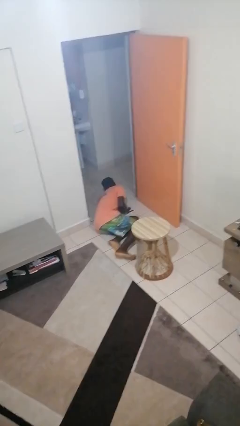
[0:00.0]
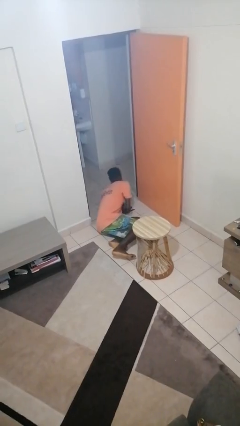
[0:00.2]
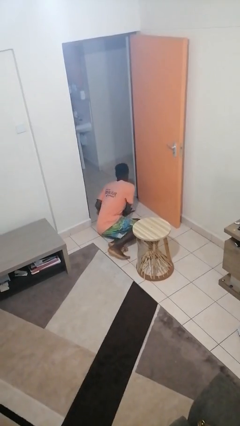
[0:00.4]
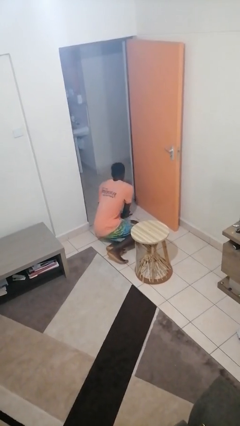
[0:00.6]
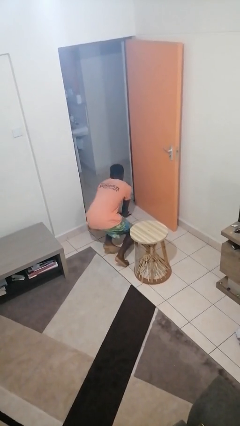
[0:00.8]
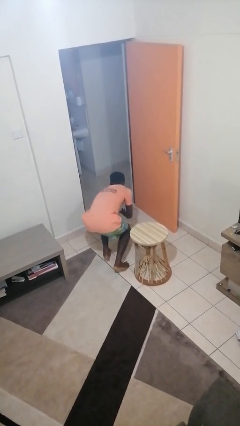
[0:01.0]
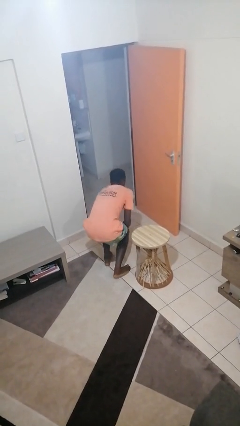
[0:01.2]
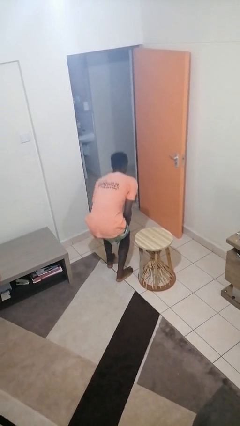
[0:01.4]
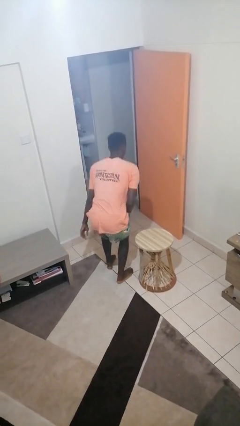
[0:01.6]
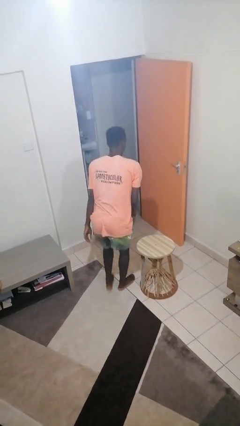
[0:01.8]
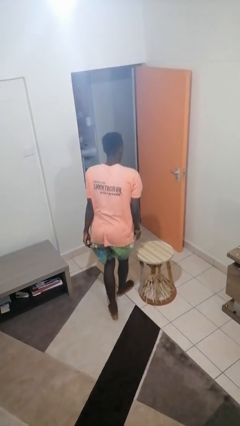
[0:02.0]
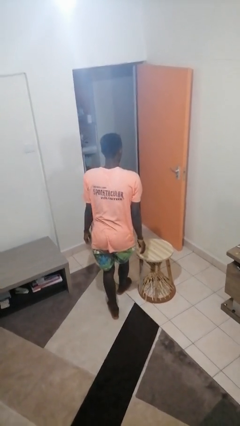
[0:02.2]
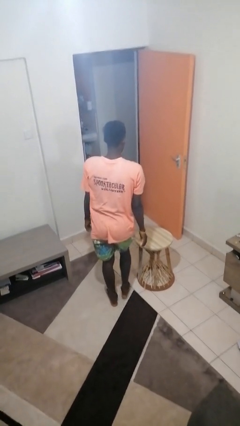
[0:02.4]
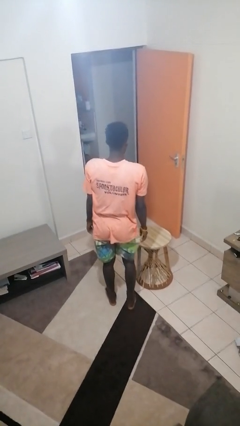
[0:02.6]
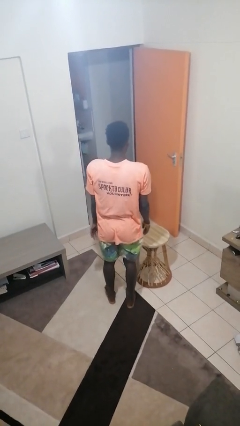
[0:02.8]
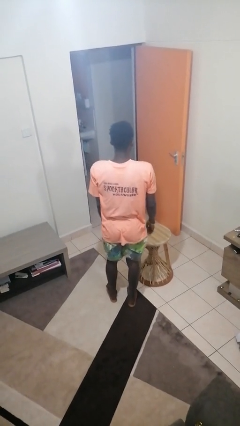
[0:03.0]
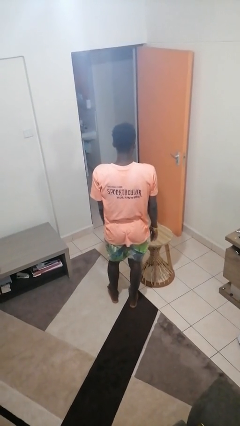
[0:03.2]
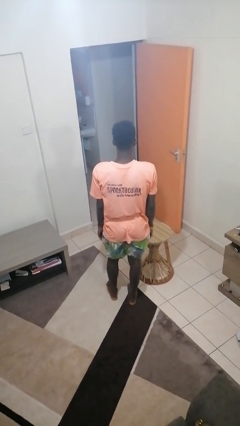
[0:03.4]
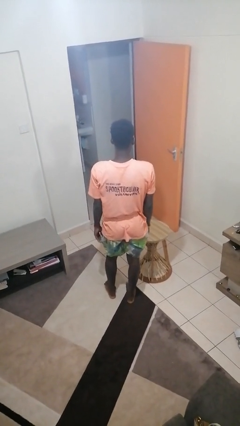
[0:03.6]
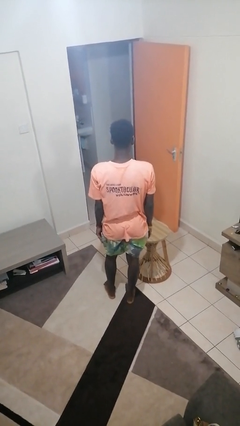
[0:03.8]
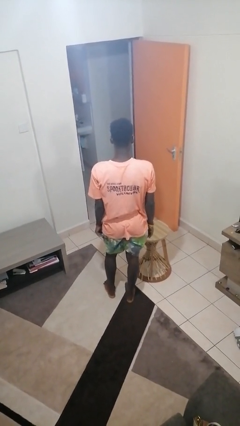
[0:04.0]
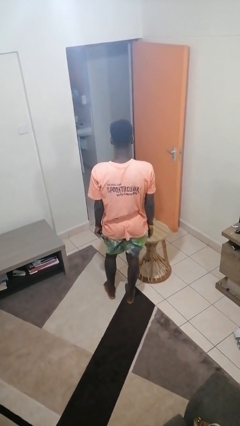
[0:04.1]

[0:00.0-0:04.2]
person stands up from floor

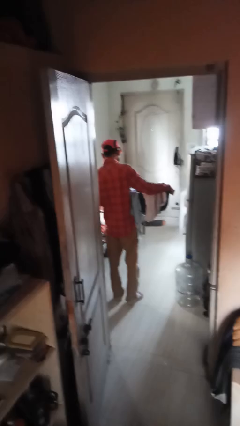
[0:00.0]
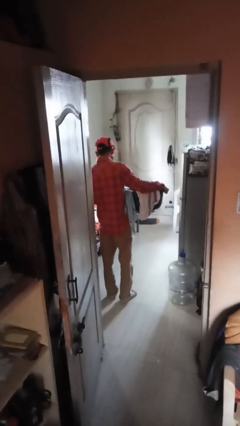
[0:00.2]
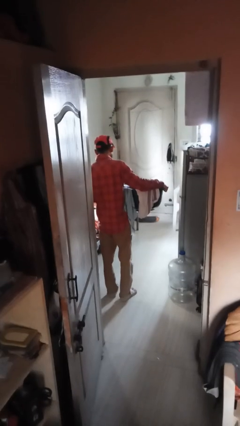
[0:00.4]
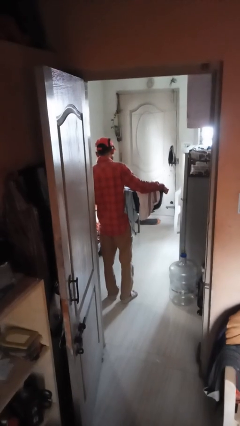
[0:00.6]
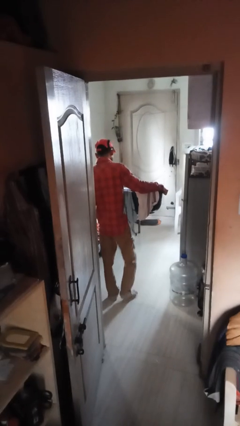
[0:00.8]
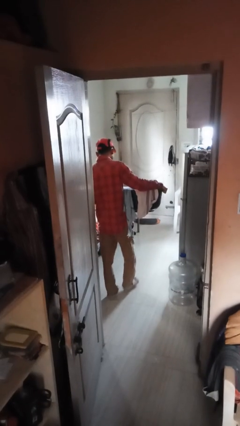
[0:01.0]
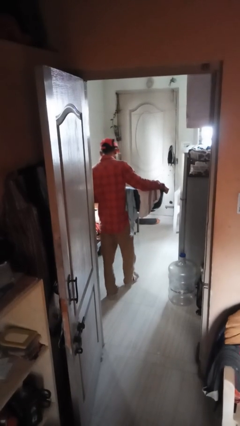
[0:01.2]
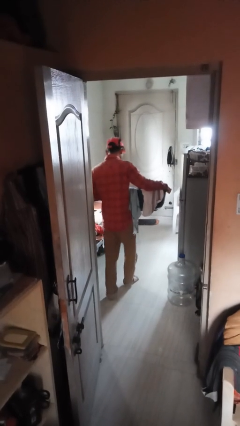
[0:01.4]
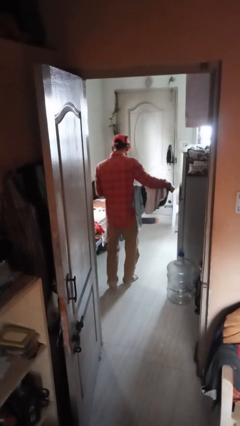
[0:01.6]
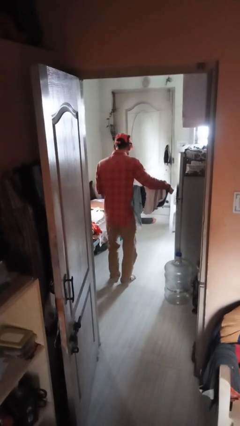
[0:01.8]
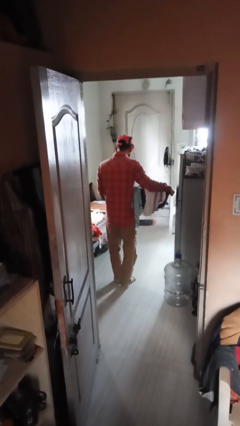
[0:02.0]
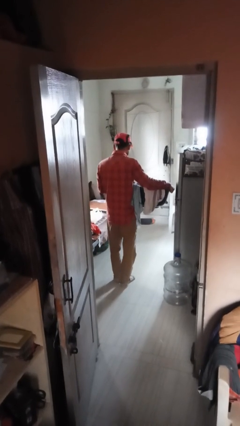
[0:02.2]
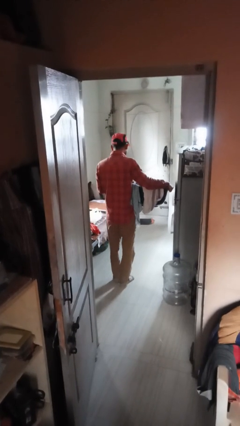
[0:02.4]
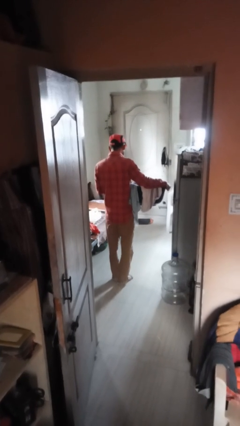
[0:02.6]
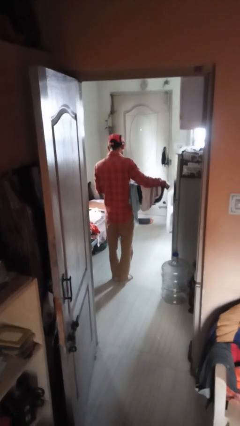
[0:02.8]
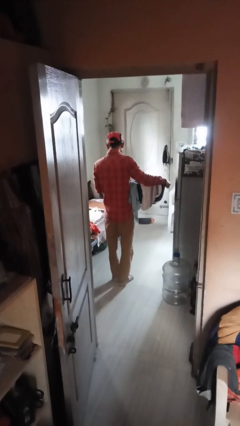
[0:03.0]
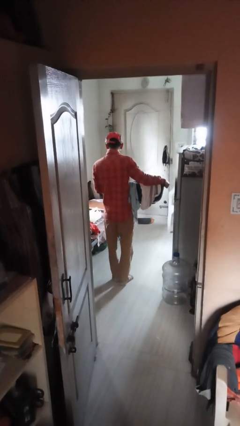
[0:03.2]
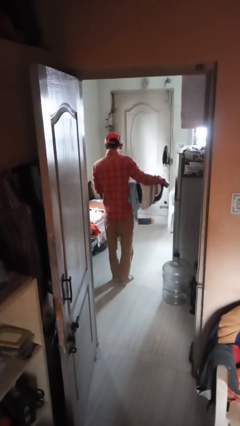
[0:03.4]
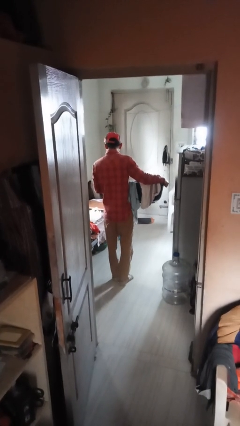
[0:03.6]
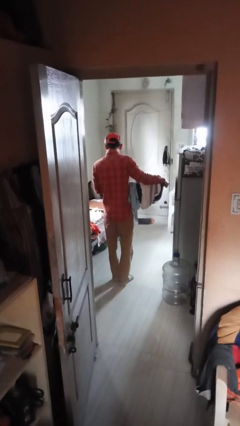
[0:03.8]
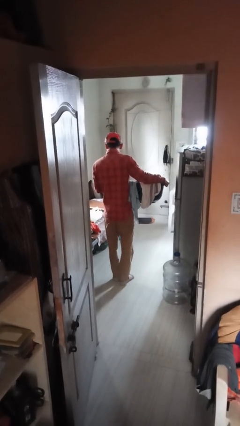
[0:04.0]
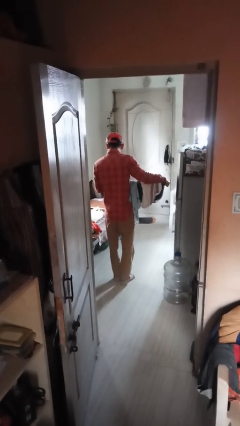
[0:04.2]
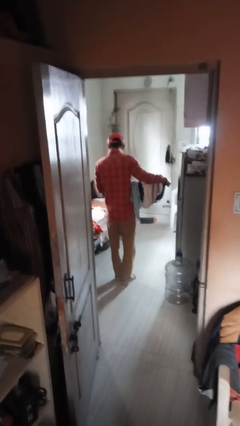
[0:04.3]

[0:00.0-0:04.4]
person carries laundry basket

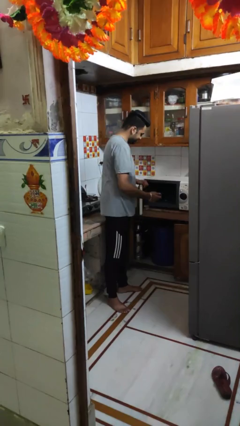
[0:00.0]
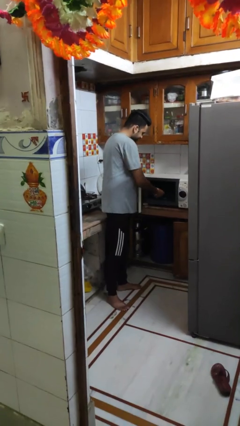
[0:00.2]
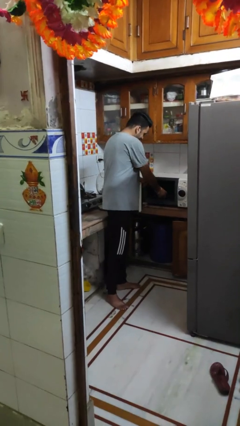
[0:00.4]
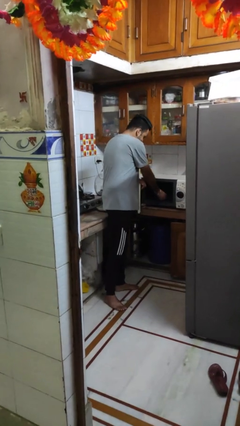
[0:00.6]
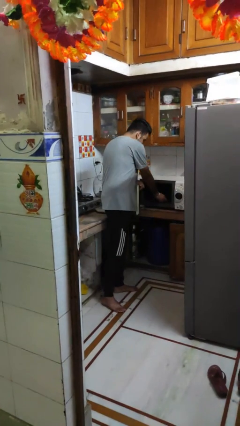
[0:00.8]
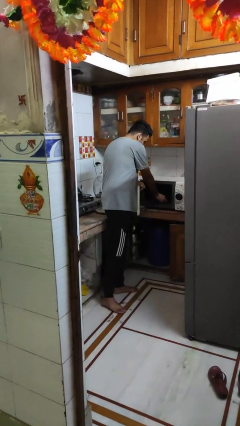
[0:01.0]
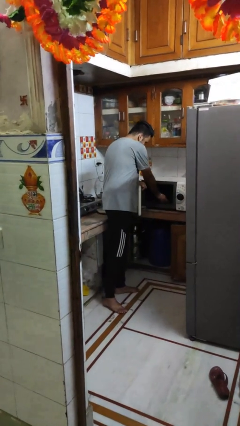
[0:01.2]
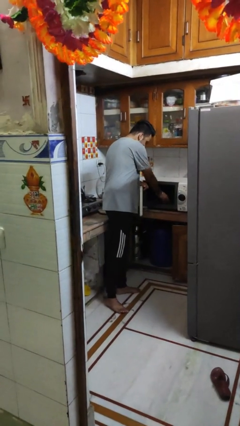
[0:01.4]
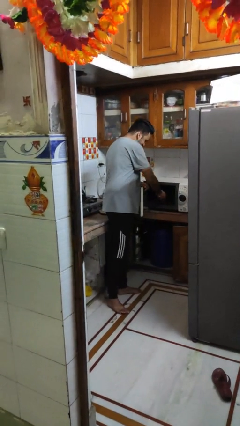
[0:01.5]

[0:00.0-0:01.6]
person puts object into microwave

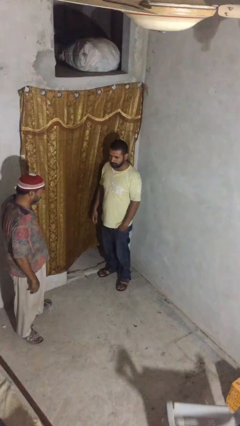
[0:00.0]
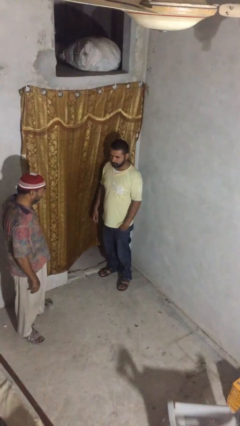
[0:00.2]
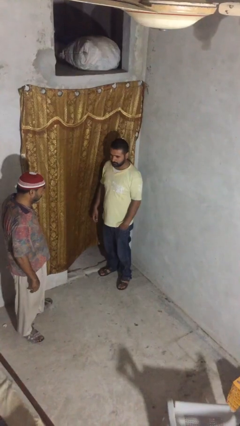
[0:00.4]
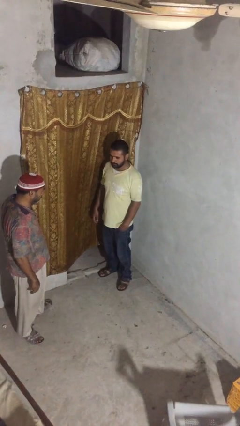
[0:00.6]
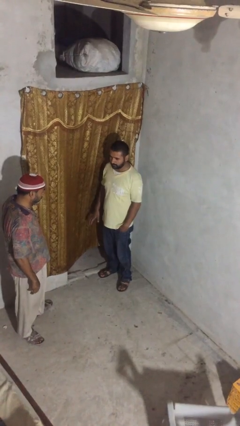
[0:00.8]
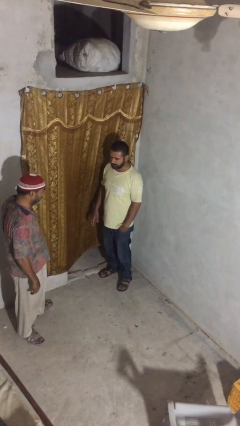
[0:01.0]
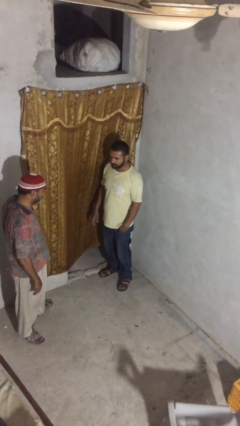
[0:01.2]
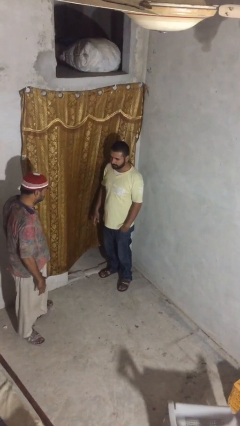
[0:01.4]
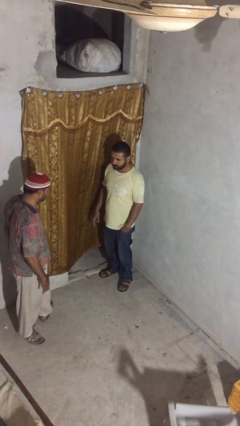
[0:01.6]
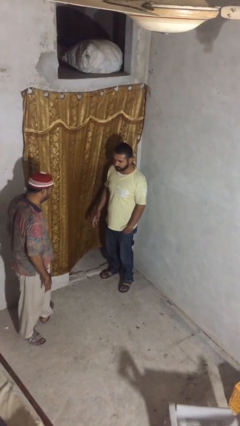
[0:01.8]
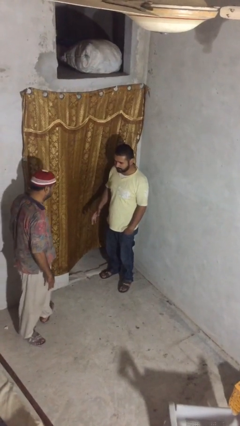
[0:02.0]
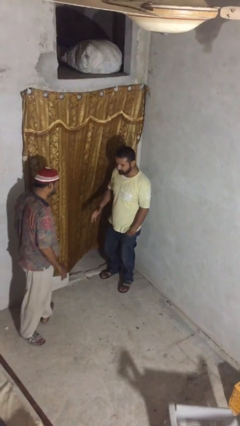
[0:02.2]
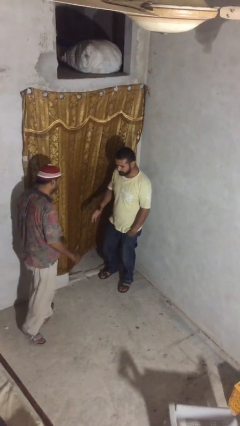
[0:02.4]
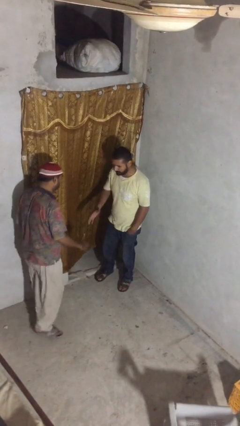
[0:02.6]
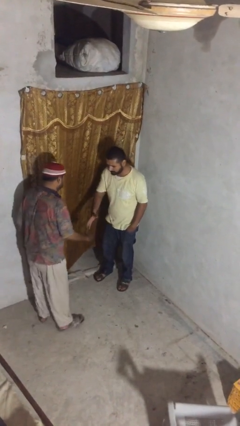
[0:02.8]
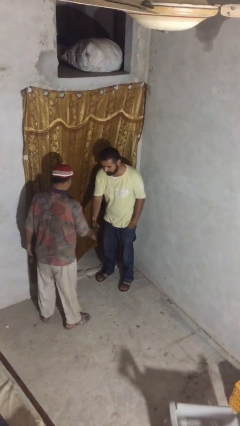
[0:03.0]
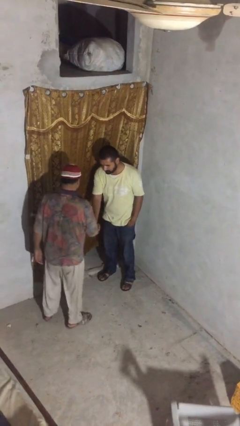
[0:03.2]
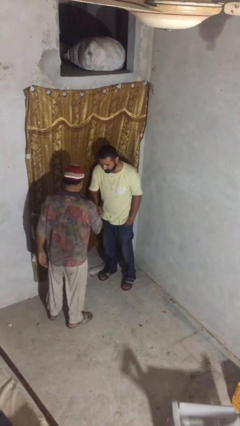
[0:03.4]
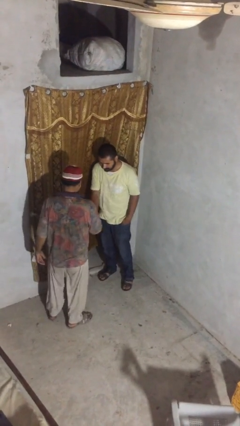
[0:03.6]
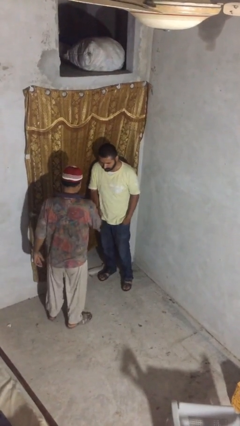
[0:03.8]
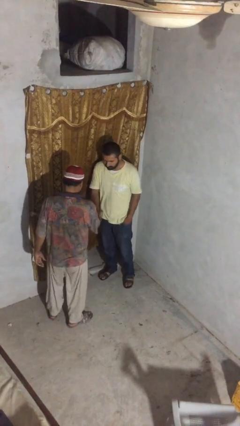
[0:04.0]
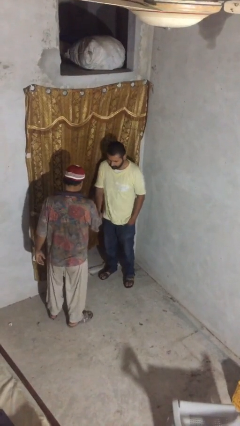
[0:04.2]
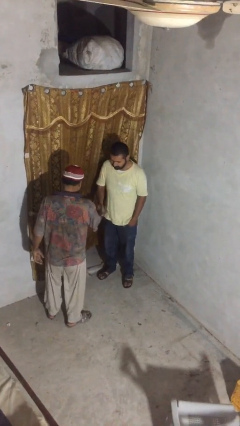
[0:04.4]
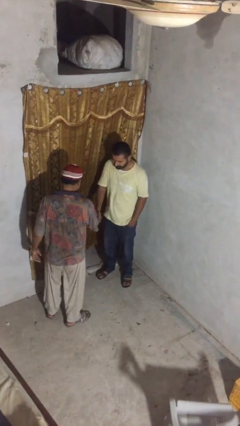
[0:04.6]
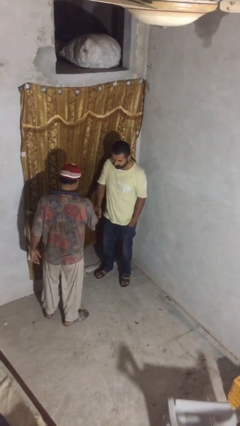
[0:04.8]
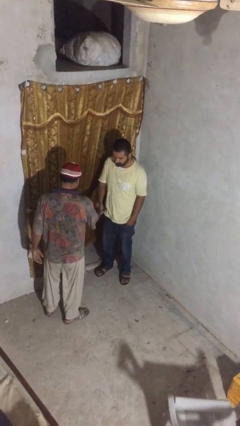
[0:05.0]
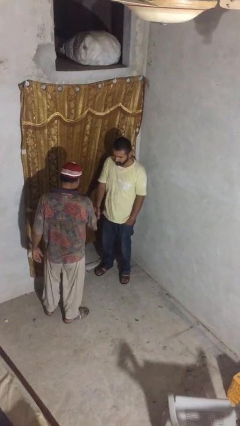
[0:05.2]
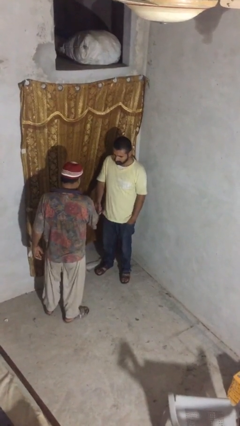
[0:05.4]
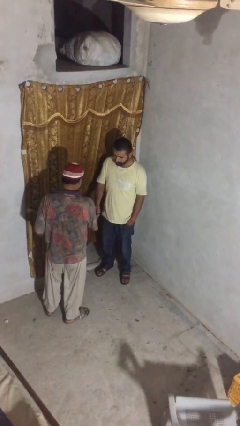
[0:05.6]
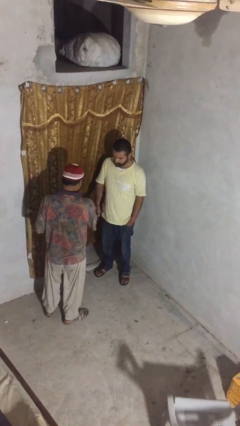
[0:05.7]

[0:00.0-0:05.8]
person shakes hand

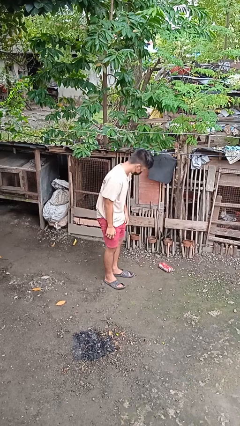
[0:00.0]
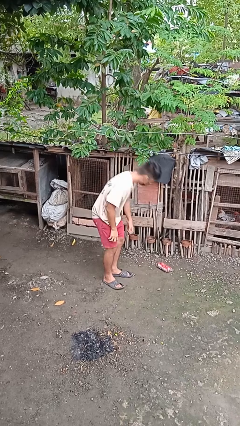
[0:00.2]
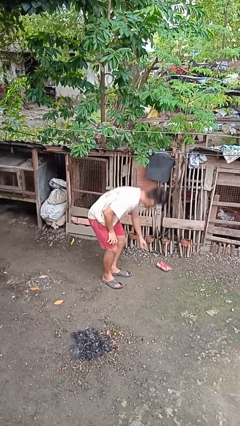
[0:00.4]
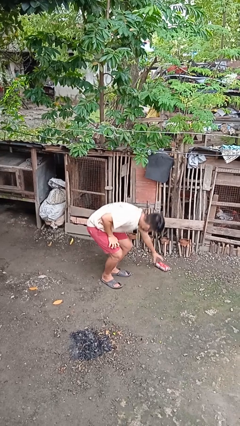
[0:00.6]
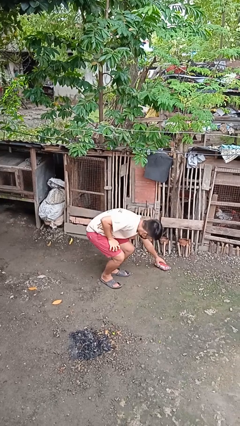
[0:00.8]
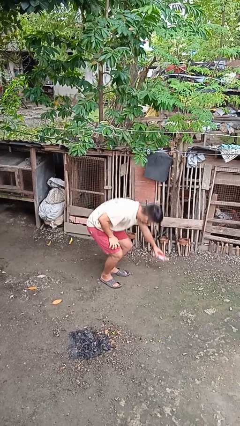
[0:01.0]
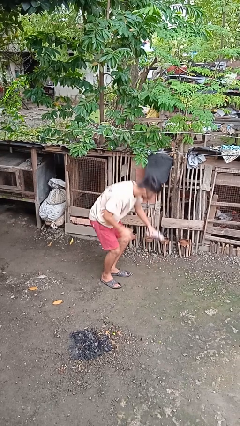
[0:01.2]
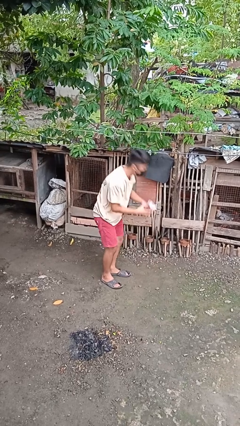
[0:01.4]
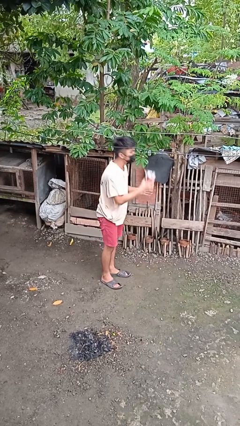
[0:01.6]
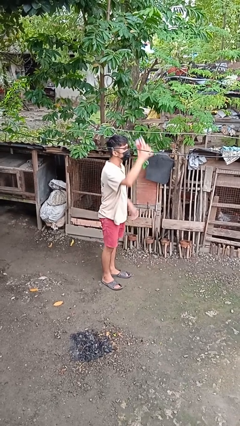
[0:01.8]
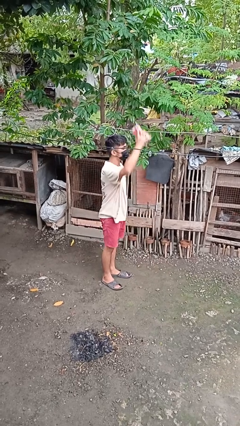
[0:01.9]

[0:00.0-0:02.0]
person picks up object from floor

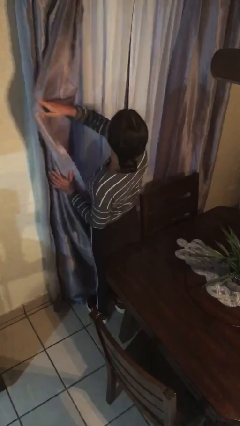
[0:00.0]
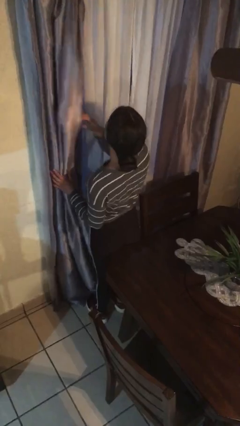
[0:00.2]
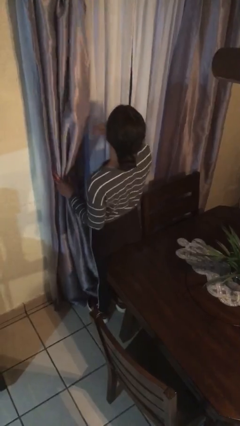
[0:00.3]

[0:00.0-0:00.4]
person opens curtains
